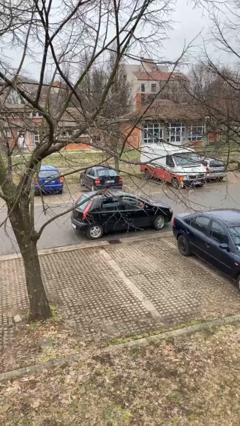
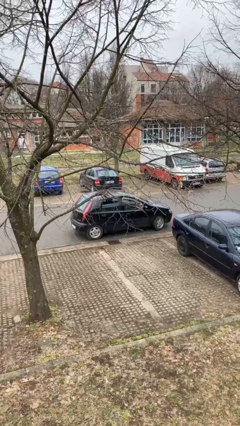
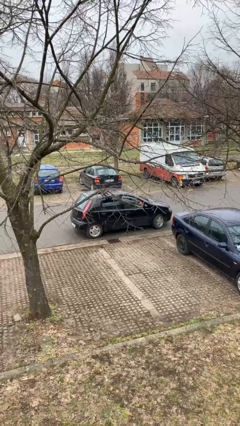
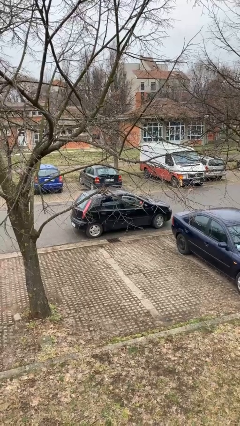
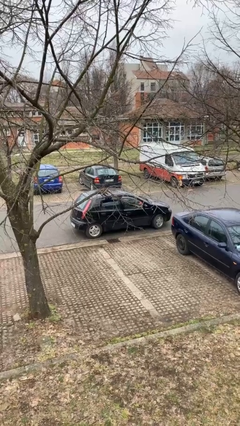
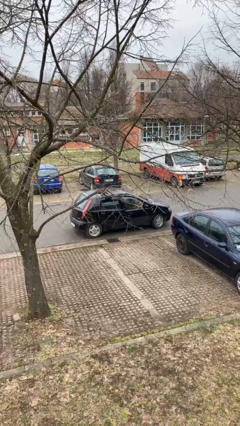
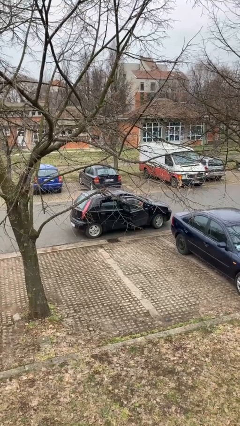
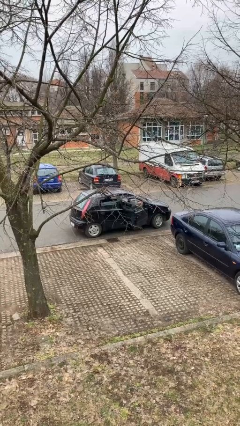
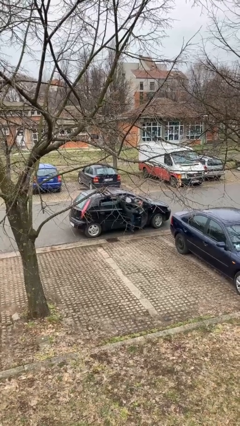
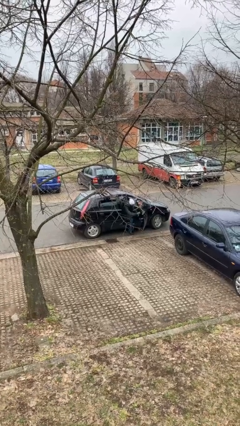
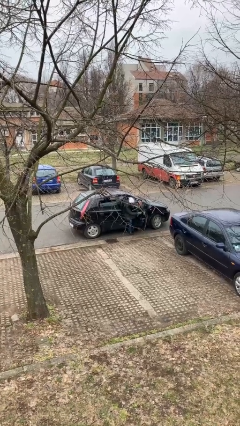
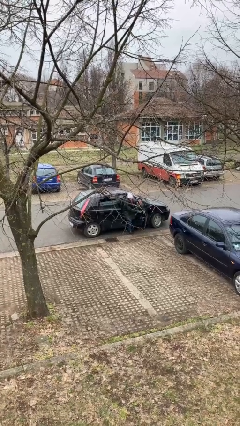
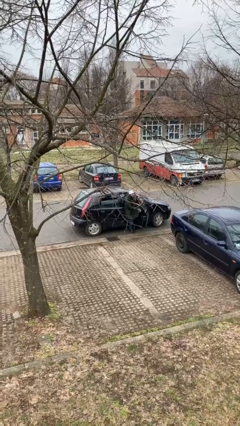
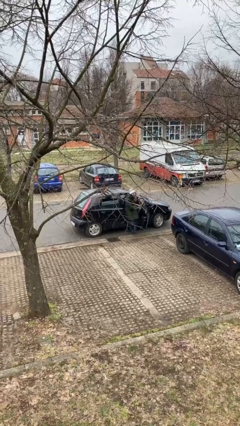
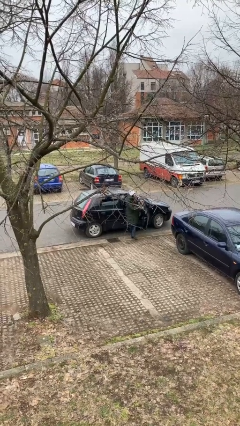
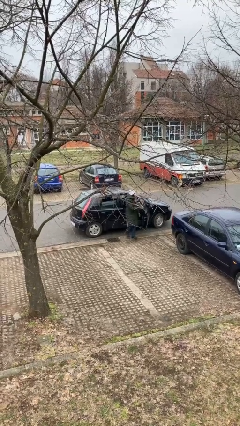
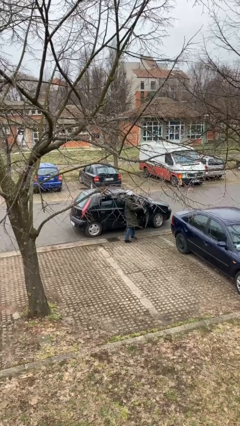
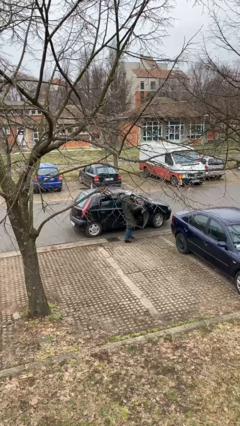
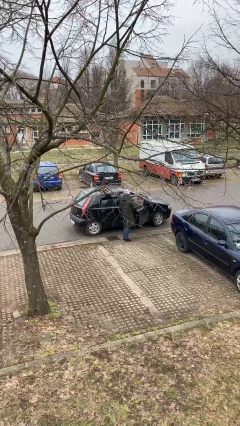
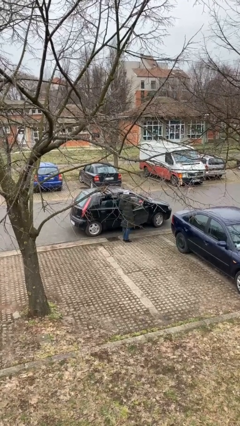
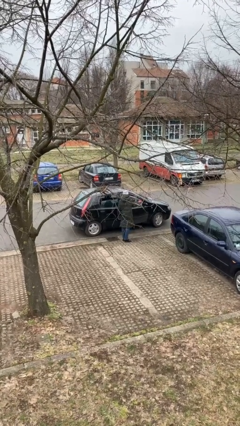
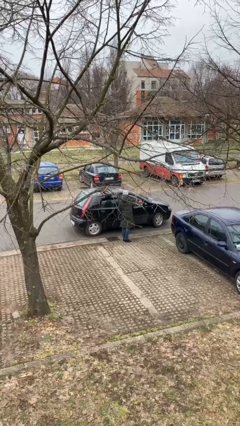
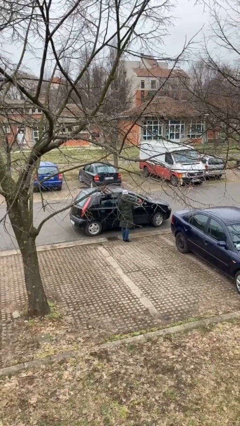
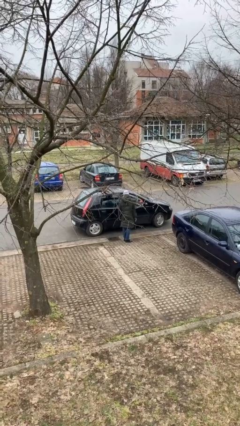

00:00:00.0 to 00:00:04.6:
car drops off person

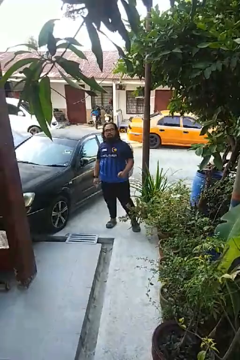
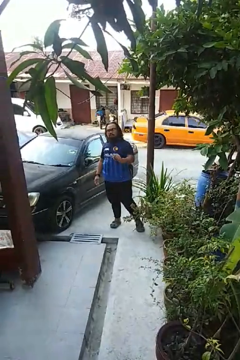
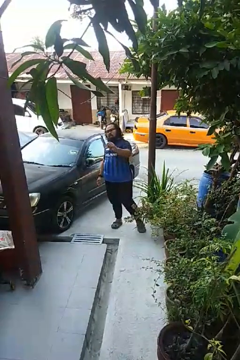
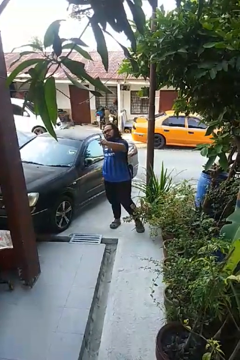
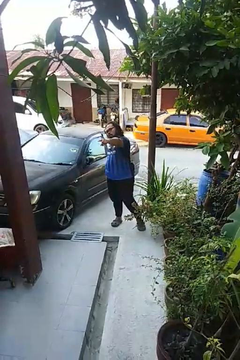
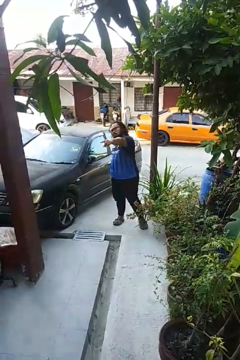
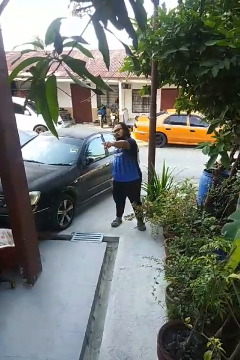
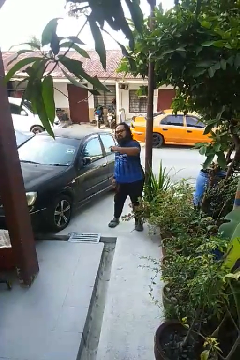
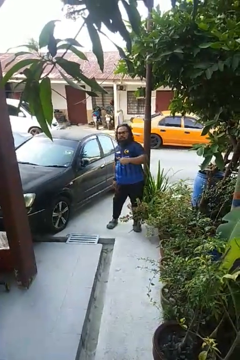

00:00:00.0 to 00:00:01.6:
person points at person

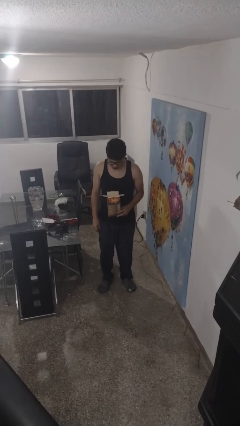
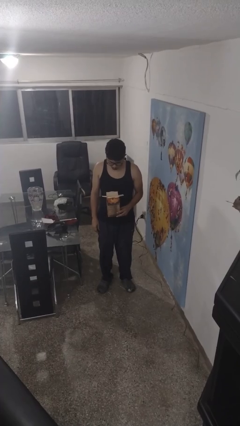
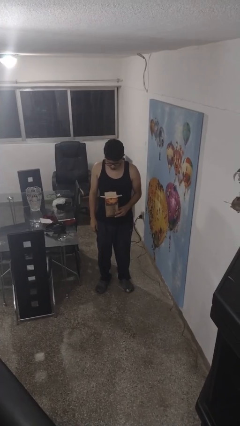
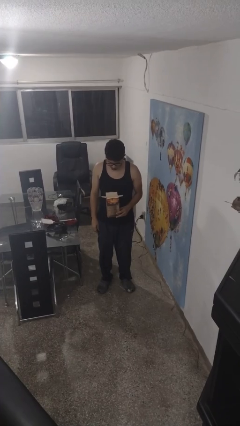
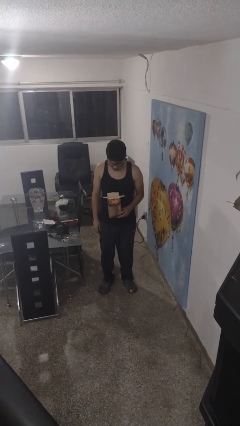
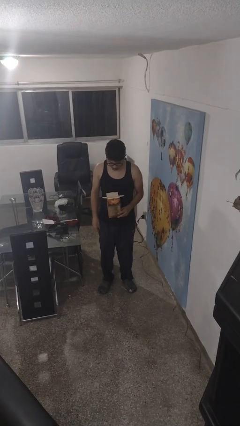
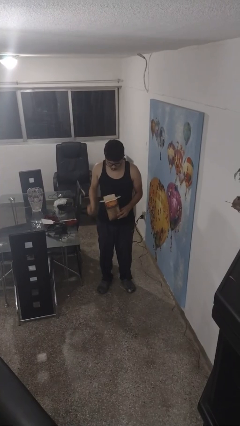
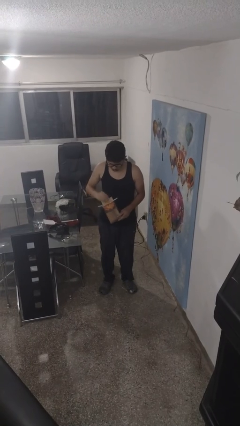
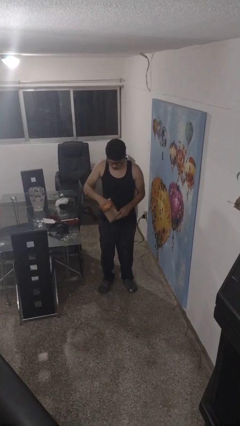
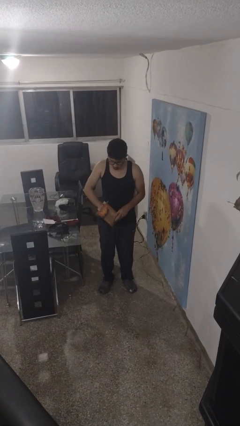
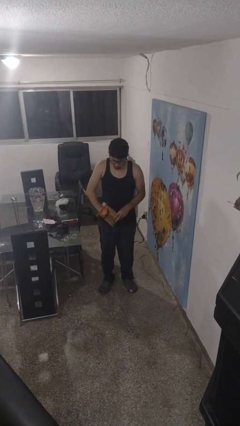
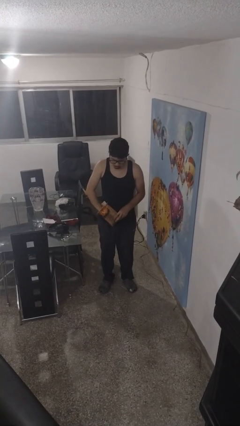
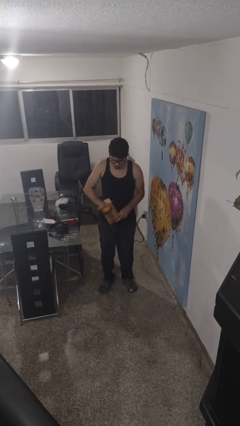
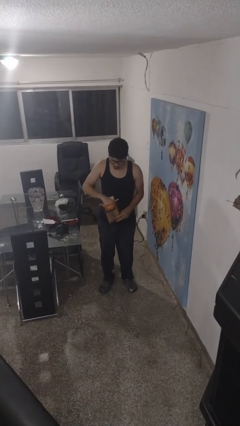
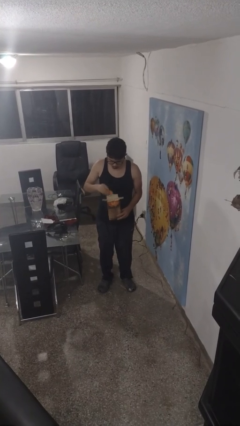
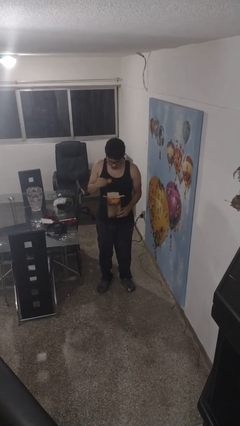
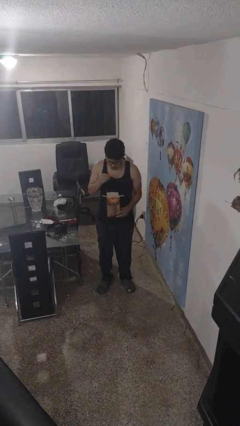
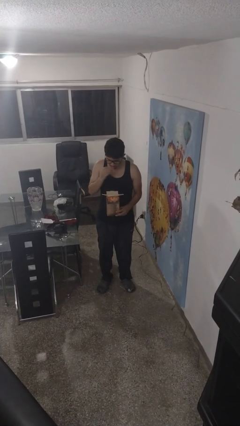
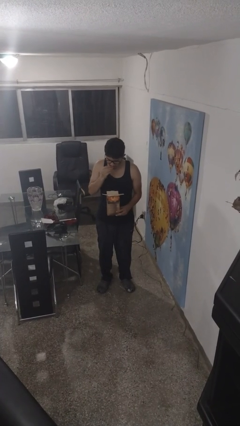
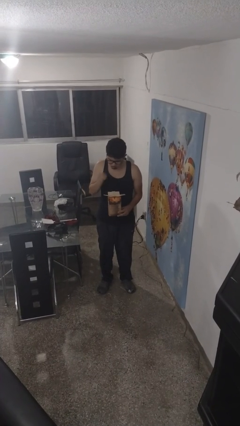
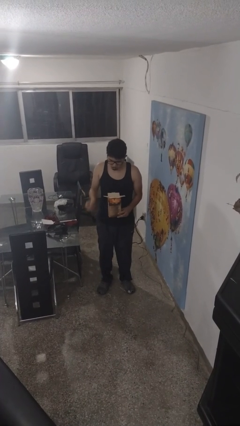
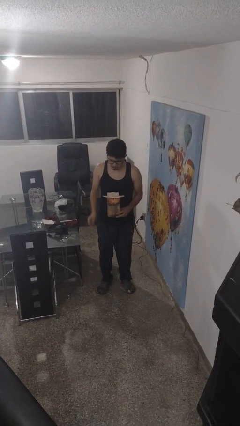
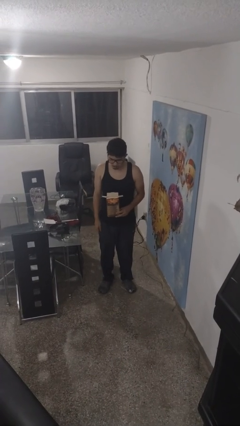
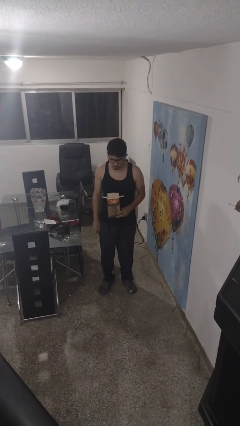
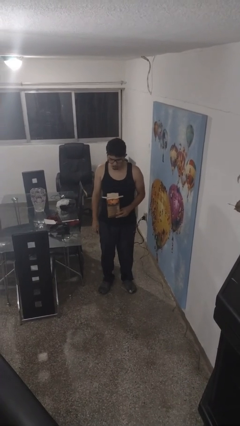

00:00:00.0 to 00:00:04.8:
person eats snack from bag

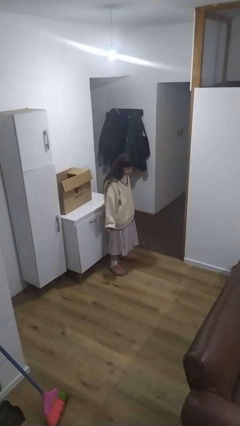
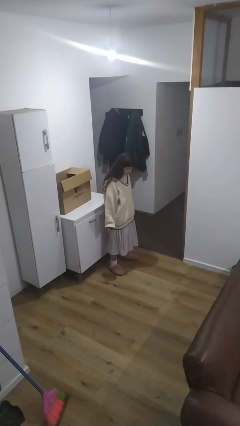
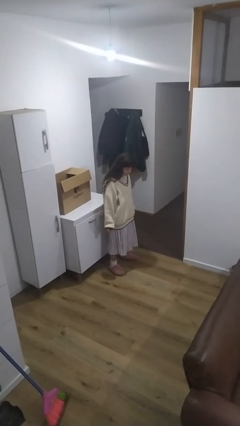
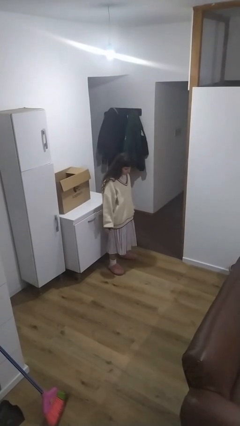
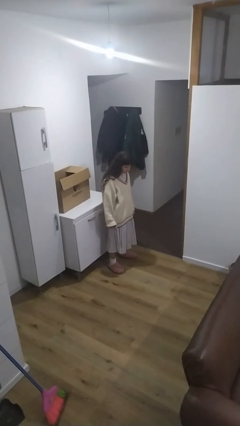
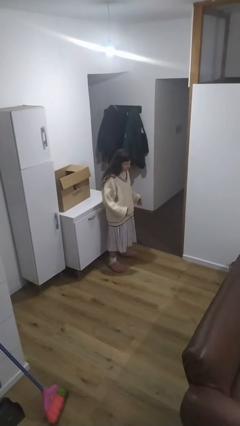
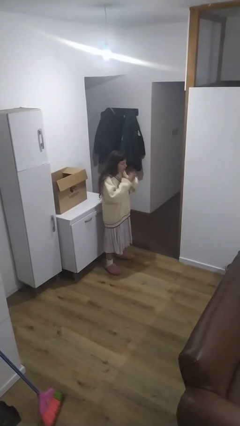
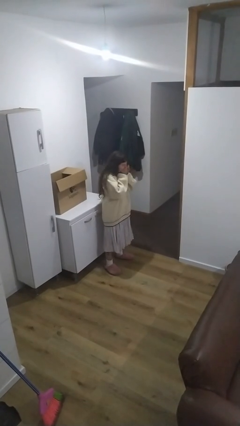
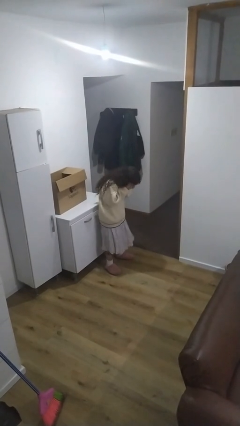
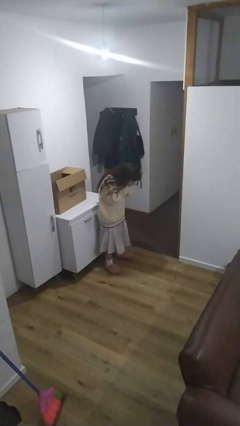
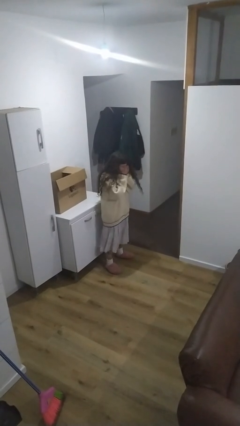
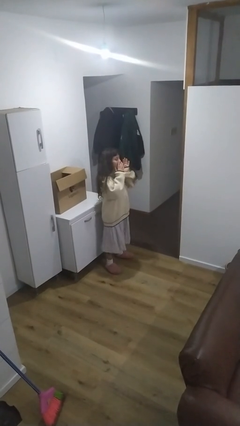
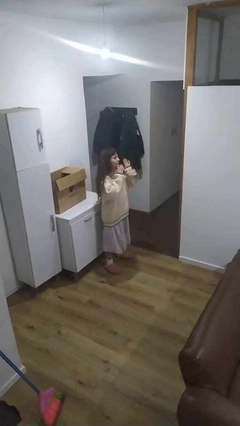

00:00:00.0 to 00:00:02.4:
person sneezes into hand

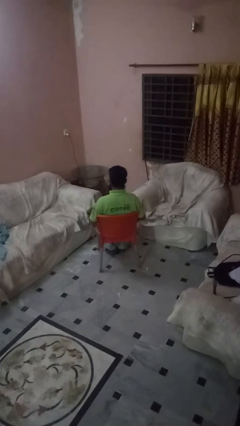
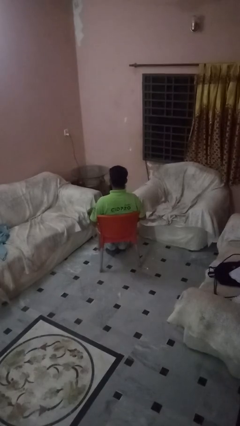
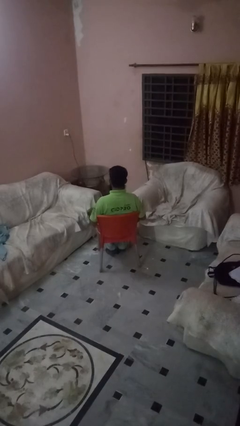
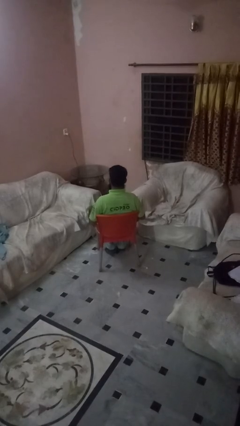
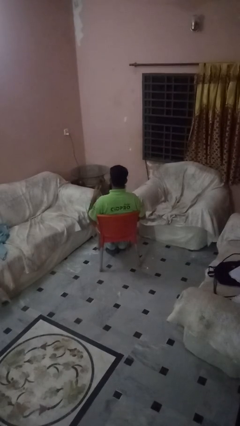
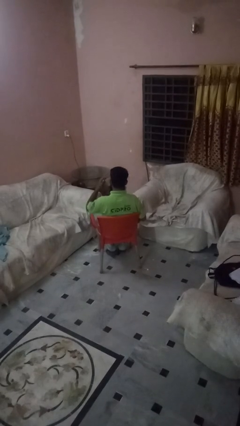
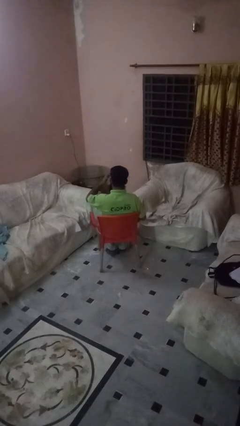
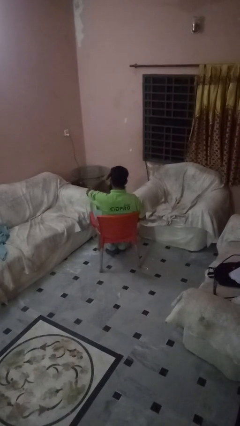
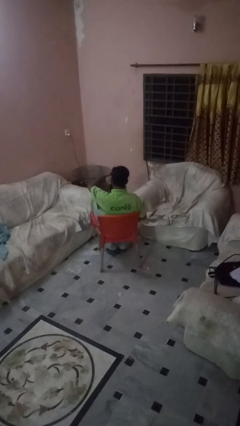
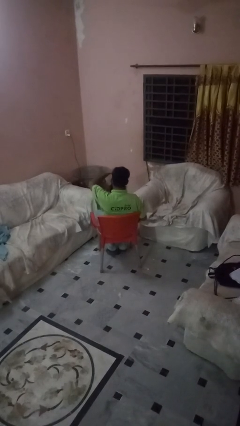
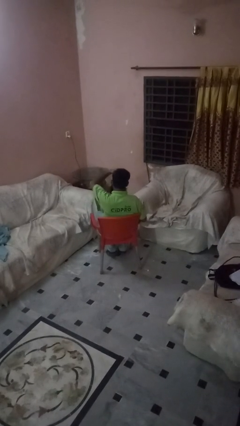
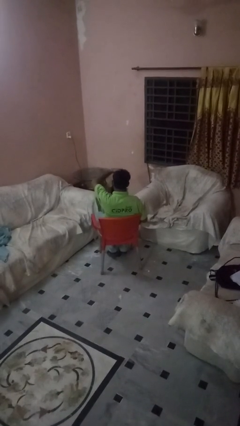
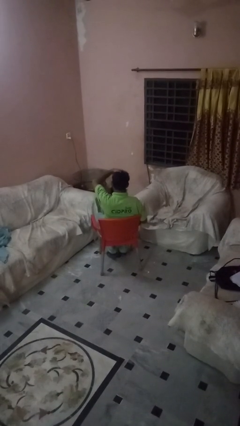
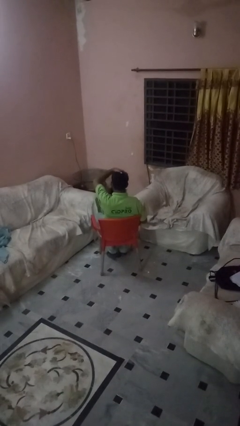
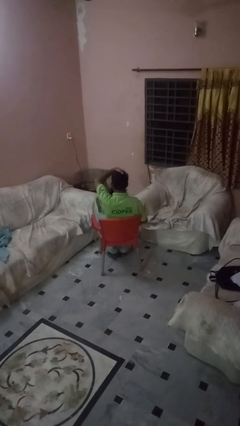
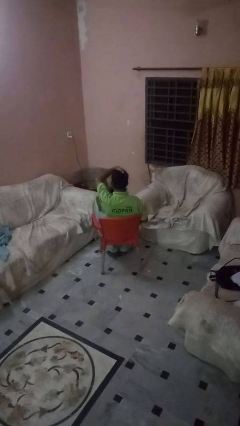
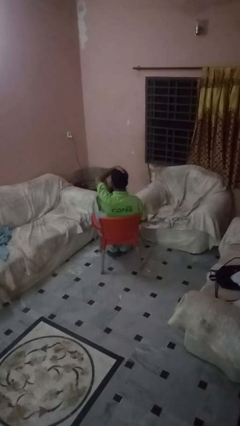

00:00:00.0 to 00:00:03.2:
person strokes hair

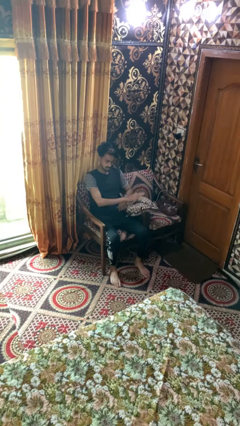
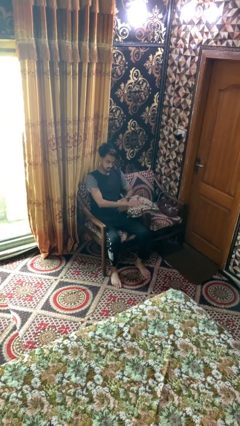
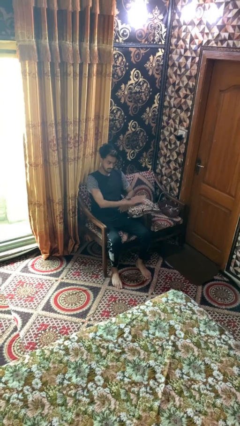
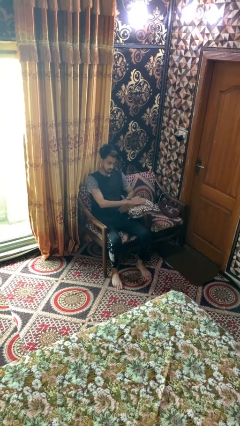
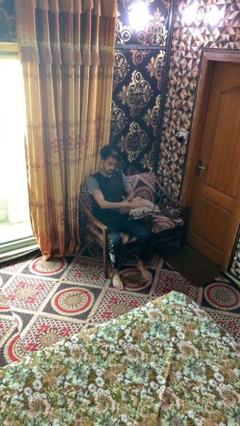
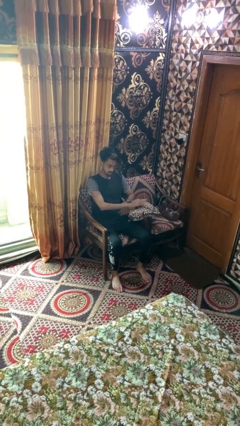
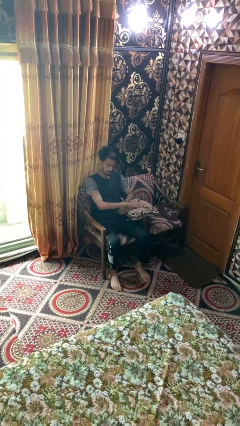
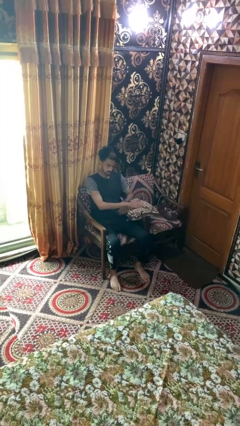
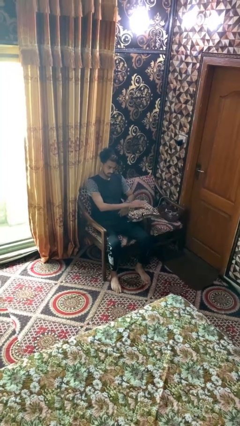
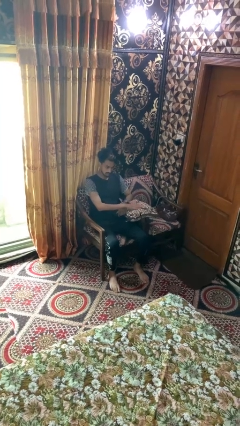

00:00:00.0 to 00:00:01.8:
person taps object with finger
